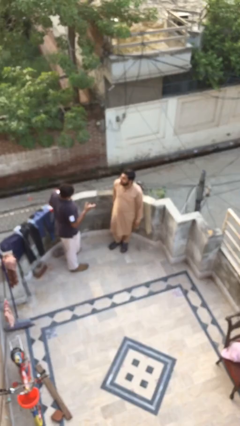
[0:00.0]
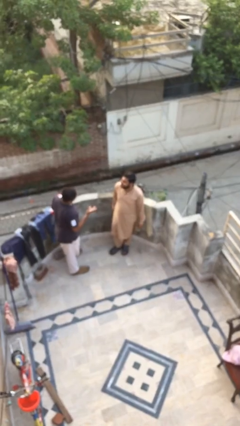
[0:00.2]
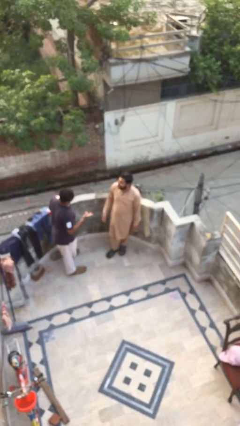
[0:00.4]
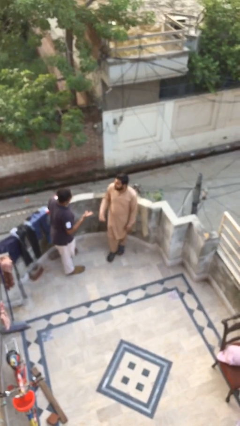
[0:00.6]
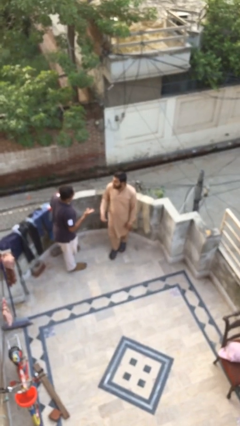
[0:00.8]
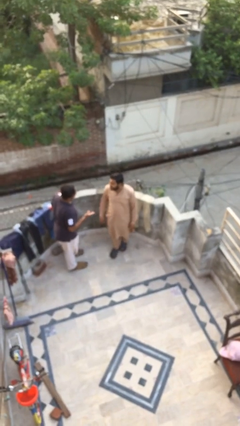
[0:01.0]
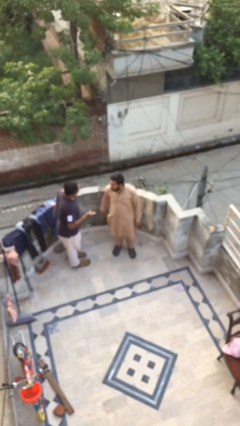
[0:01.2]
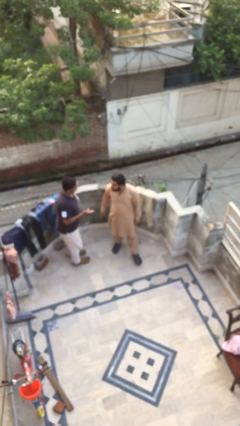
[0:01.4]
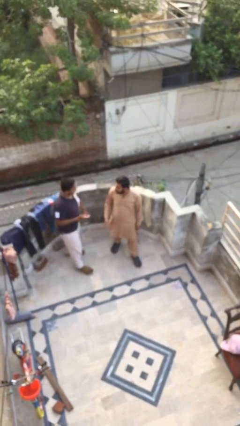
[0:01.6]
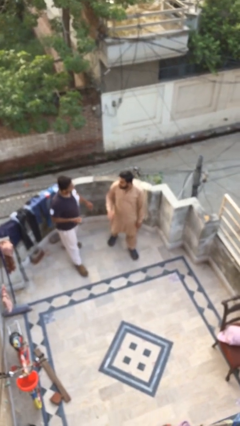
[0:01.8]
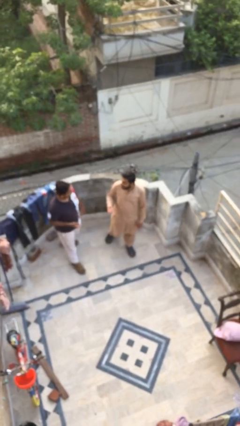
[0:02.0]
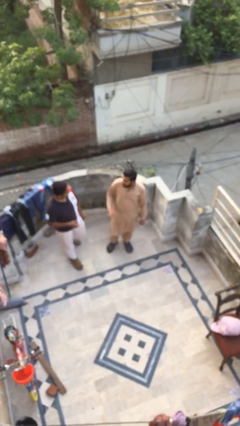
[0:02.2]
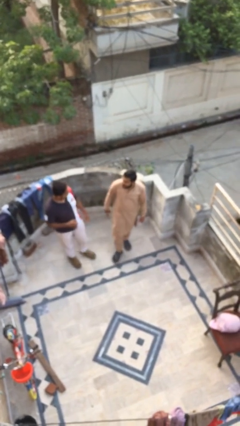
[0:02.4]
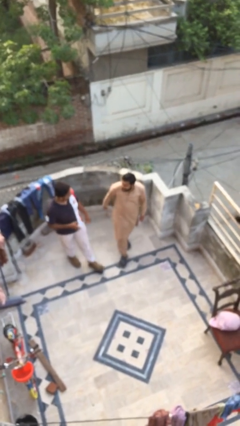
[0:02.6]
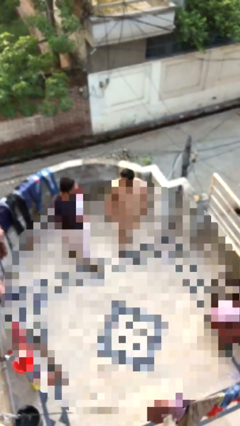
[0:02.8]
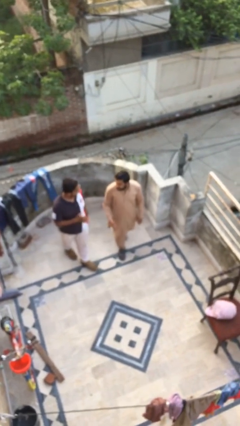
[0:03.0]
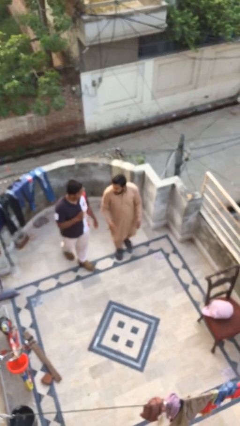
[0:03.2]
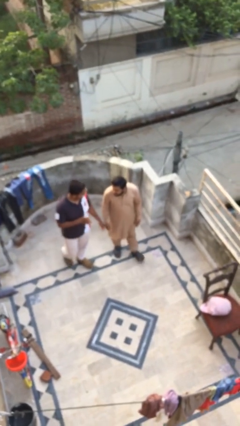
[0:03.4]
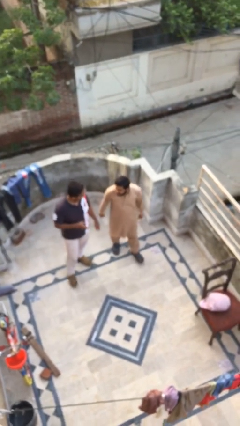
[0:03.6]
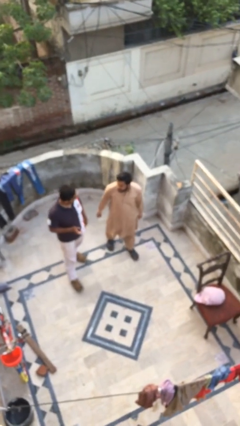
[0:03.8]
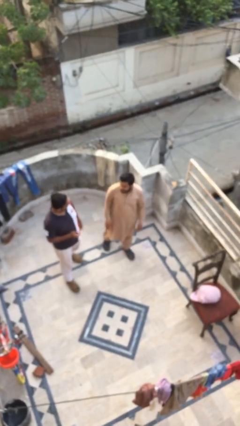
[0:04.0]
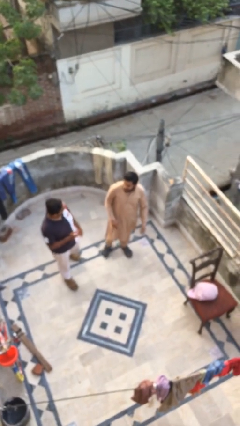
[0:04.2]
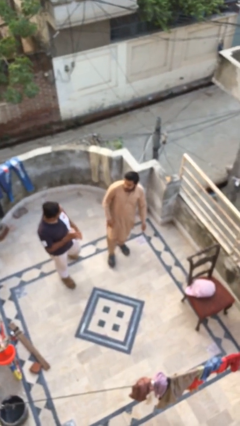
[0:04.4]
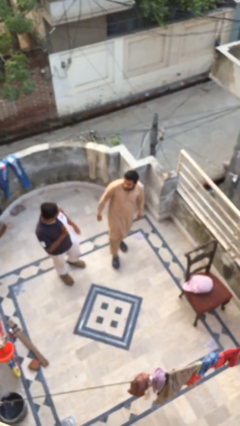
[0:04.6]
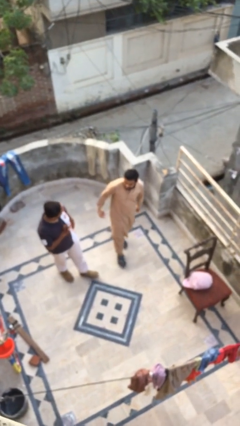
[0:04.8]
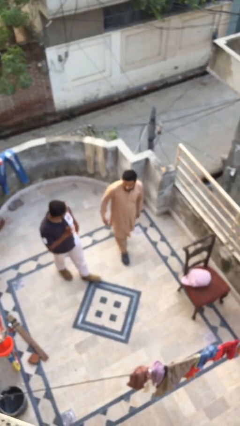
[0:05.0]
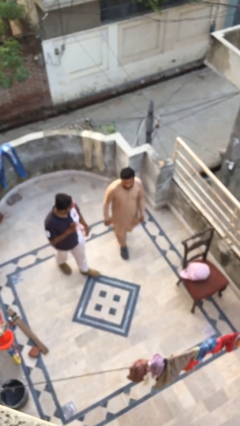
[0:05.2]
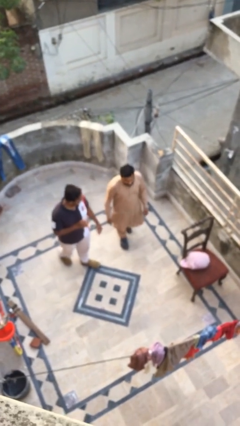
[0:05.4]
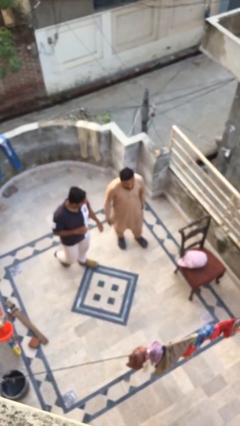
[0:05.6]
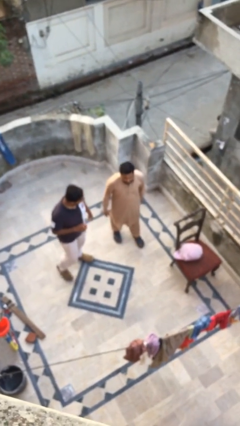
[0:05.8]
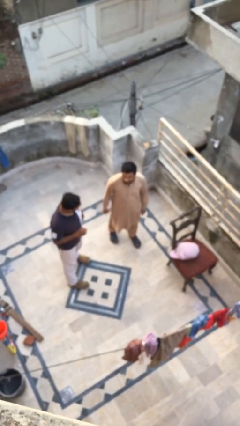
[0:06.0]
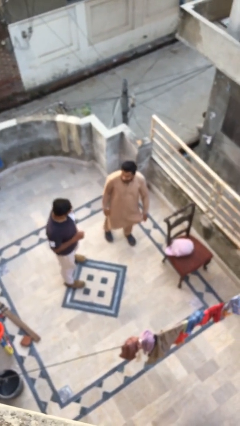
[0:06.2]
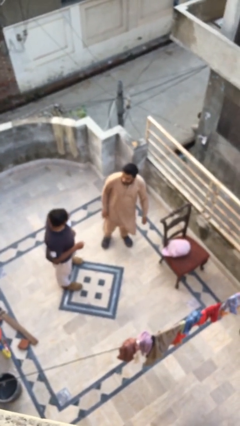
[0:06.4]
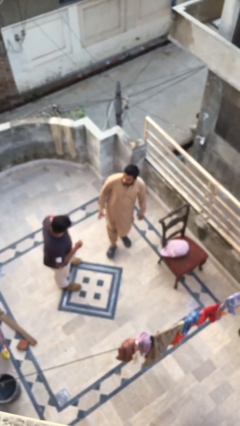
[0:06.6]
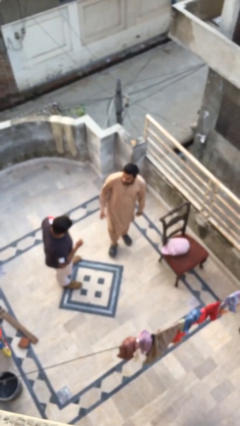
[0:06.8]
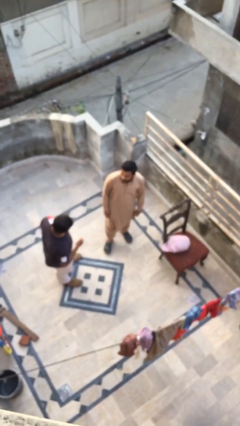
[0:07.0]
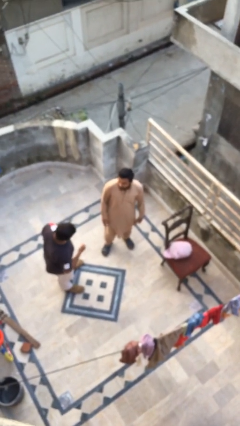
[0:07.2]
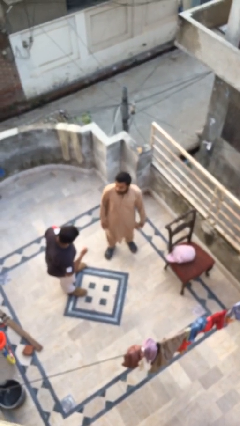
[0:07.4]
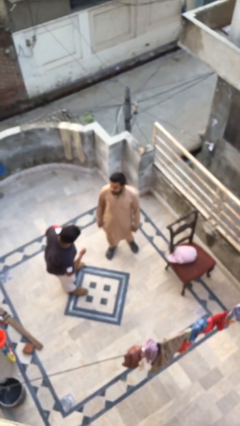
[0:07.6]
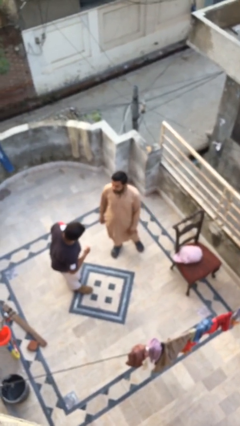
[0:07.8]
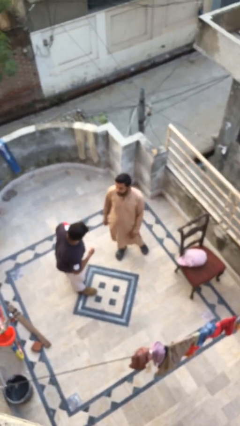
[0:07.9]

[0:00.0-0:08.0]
person talks to person

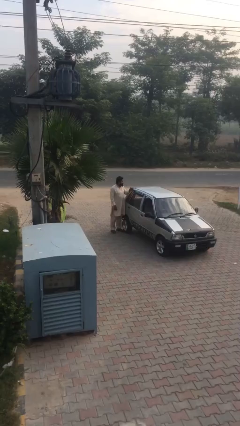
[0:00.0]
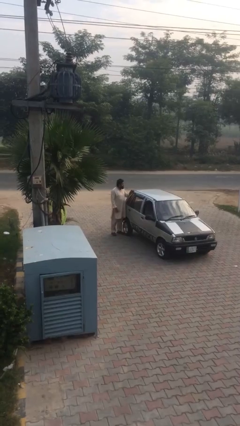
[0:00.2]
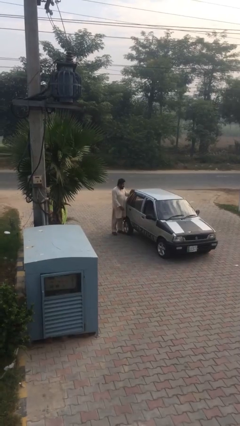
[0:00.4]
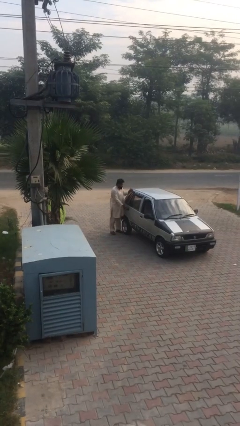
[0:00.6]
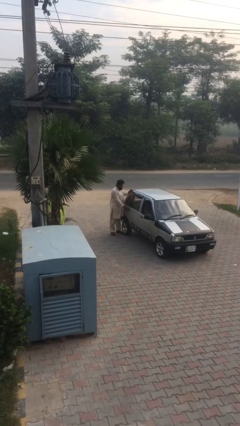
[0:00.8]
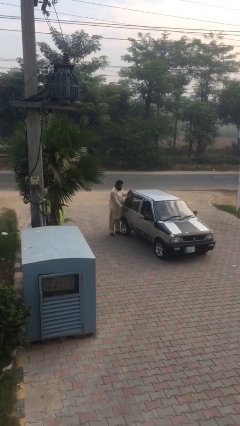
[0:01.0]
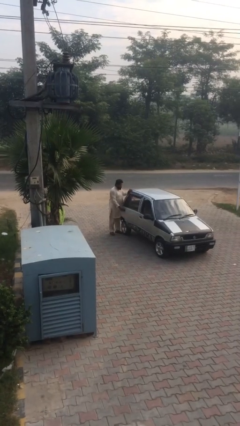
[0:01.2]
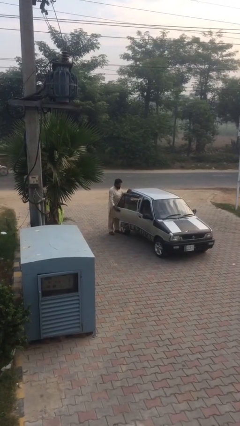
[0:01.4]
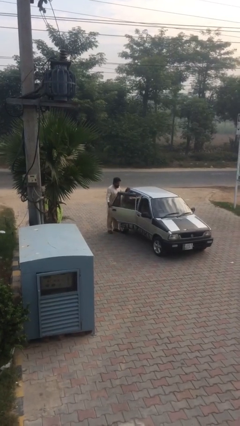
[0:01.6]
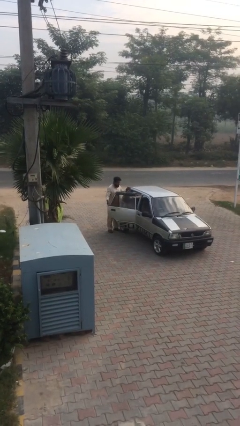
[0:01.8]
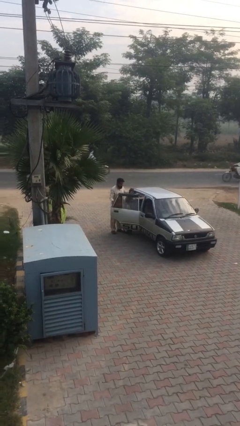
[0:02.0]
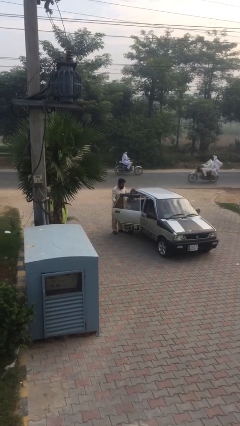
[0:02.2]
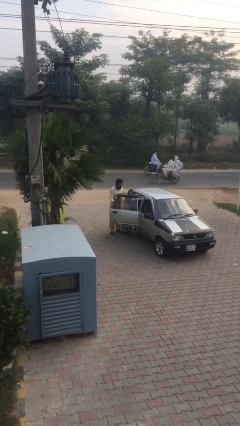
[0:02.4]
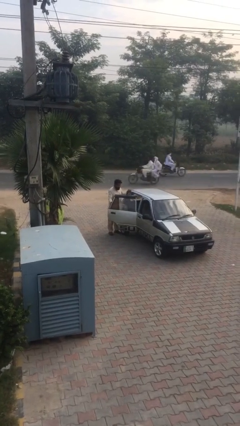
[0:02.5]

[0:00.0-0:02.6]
person opens car door

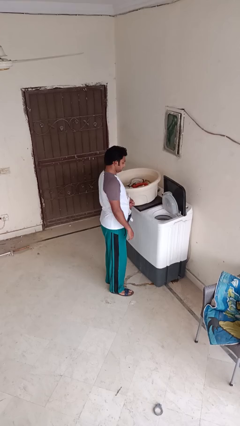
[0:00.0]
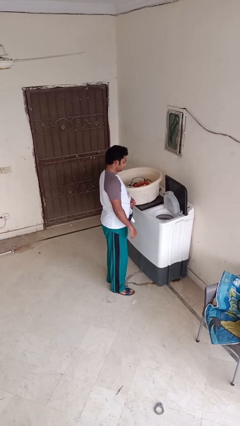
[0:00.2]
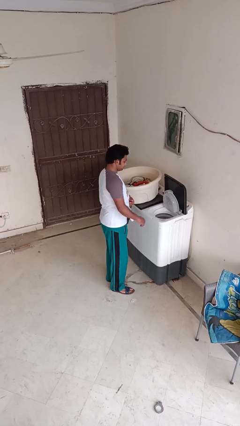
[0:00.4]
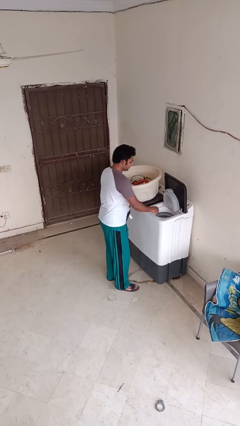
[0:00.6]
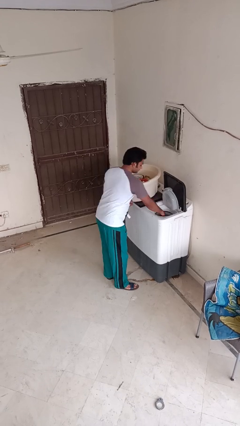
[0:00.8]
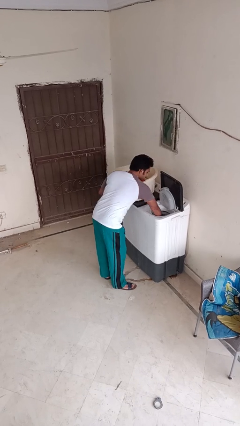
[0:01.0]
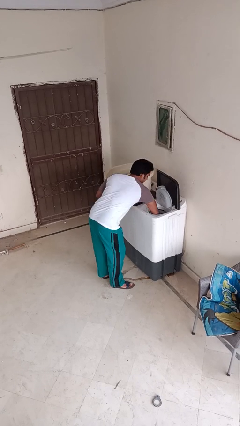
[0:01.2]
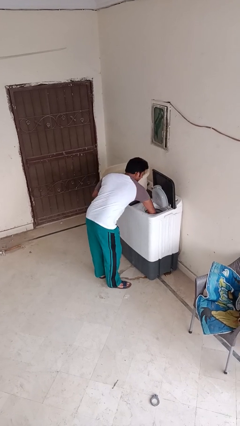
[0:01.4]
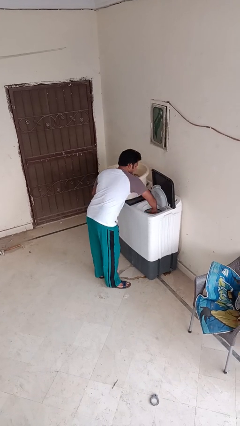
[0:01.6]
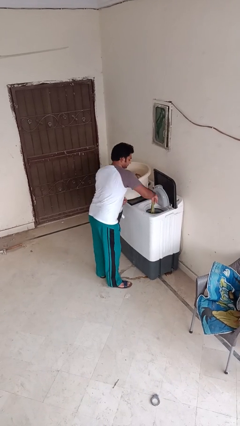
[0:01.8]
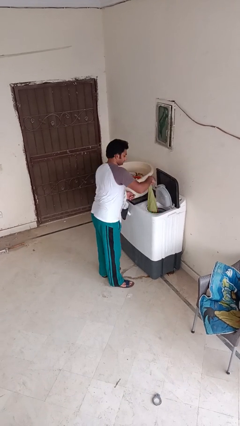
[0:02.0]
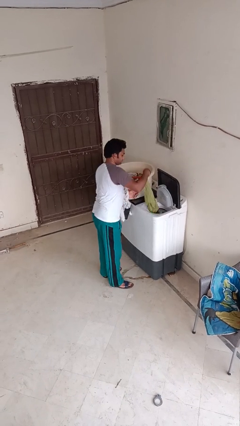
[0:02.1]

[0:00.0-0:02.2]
person unloads dryer

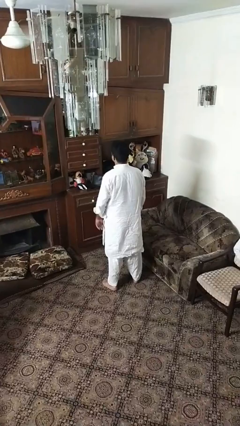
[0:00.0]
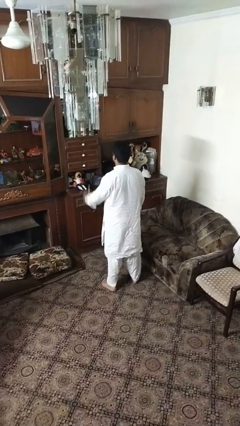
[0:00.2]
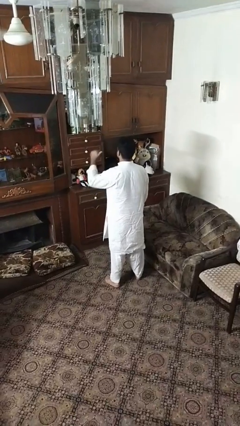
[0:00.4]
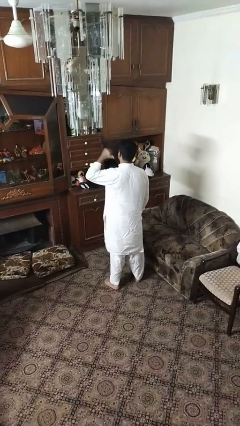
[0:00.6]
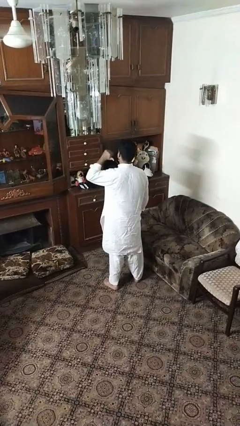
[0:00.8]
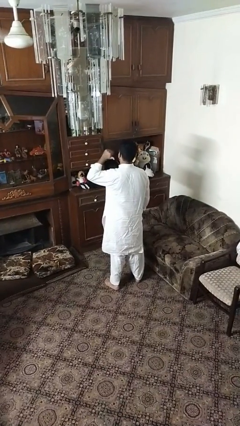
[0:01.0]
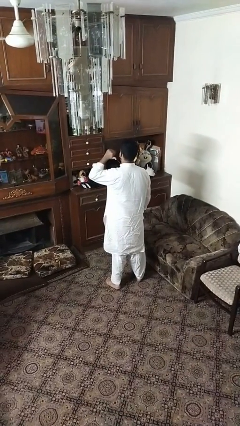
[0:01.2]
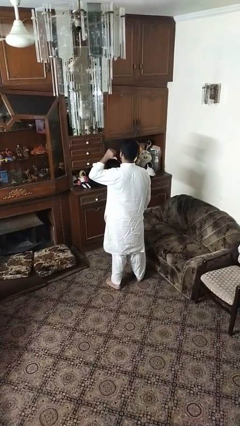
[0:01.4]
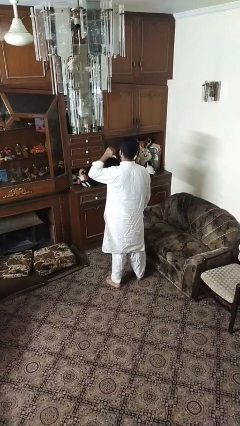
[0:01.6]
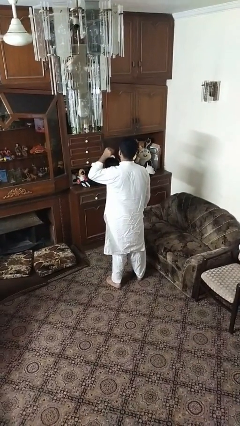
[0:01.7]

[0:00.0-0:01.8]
person gestures behind me

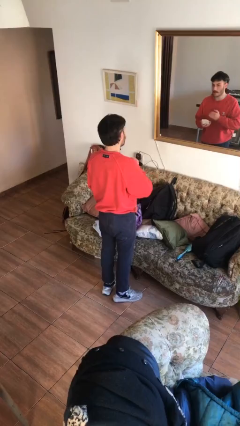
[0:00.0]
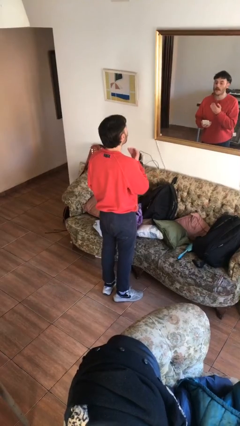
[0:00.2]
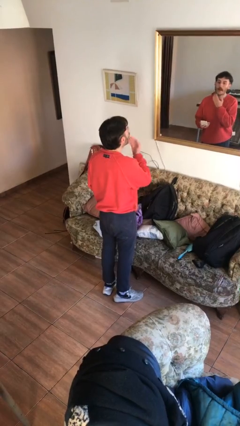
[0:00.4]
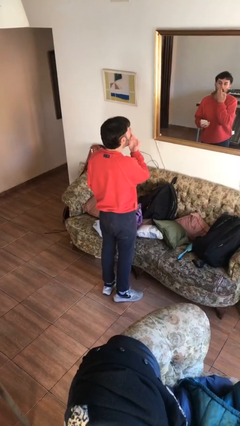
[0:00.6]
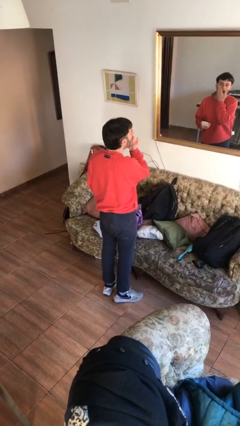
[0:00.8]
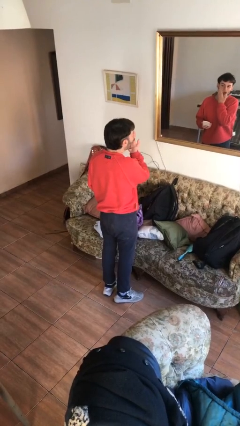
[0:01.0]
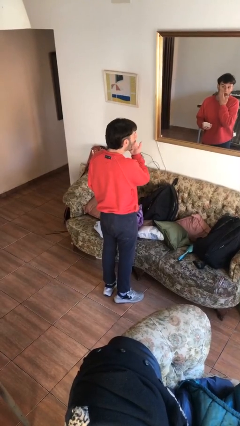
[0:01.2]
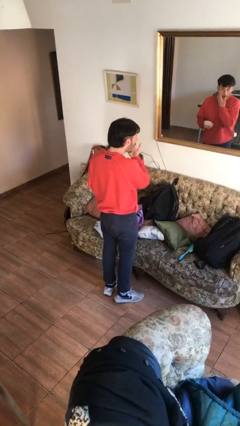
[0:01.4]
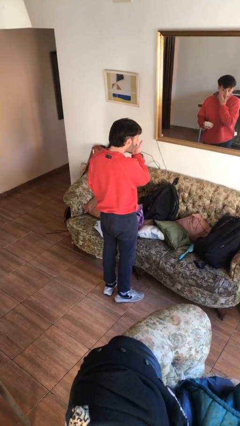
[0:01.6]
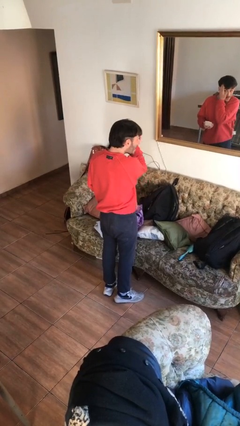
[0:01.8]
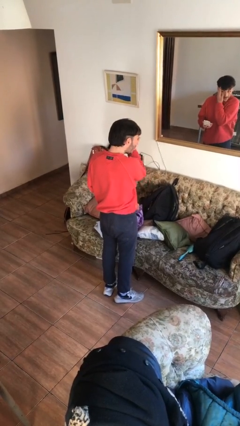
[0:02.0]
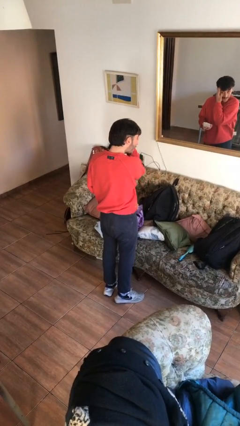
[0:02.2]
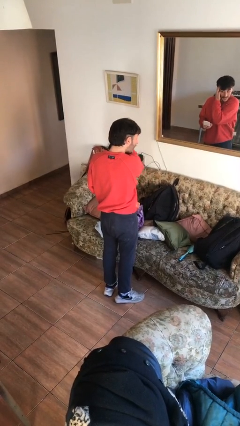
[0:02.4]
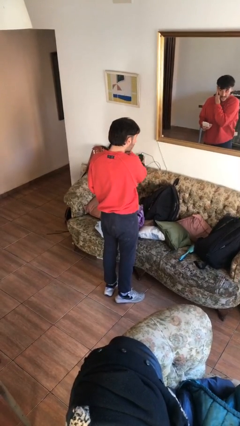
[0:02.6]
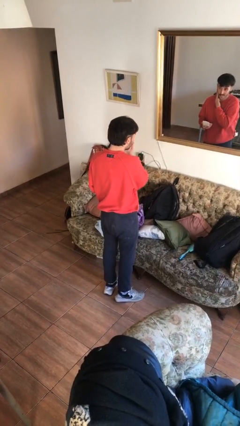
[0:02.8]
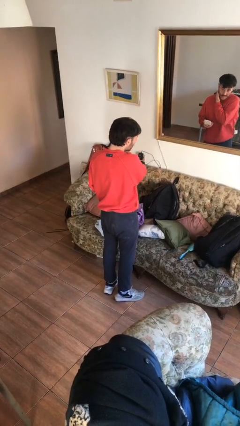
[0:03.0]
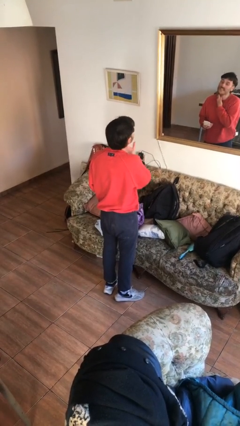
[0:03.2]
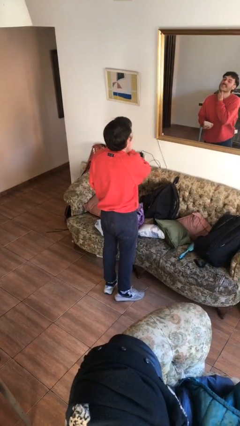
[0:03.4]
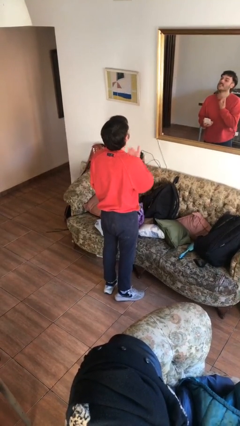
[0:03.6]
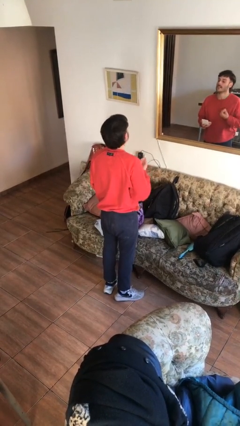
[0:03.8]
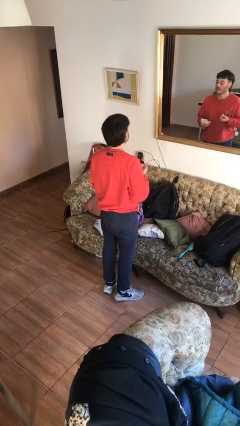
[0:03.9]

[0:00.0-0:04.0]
person applies foundation makeup
